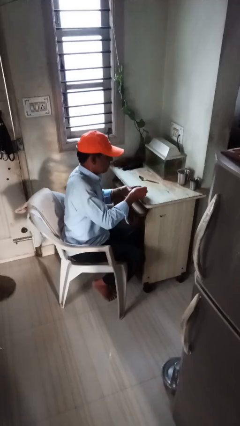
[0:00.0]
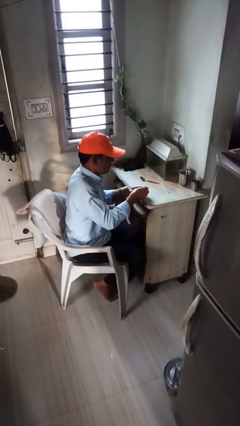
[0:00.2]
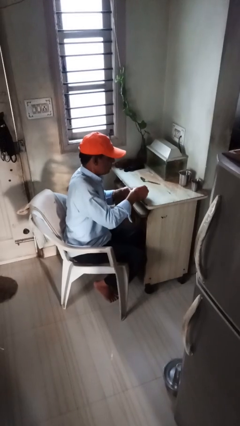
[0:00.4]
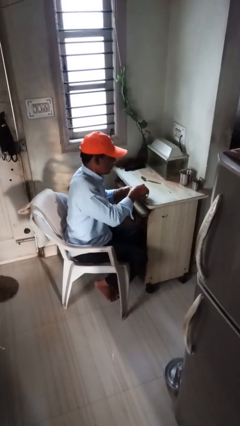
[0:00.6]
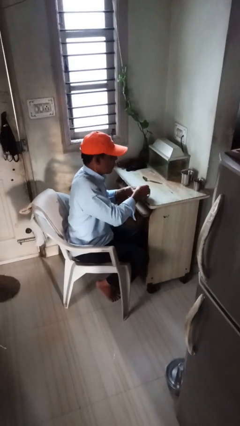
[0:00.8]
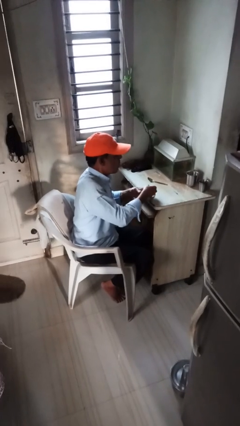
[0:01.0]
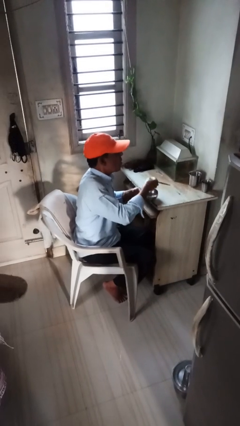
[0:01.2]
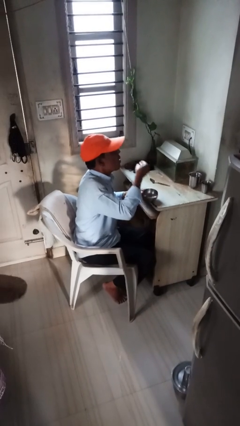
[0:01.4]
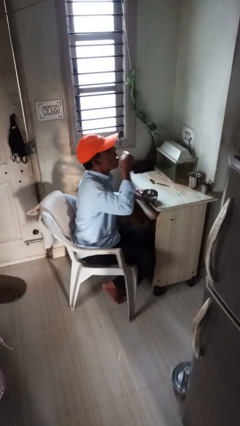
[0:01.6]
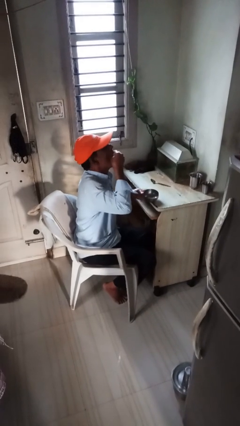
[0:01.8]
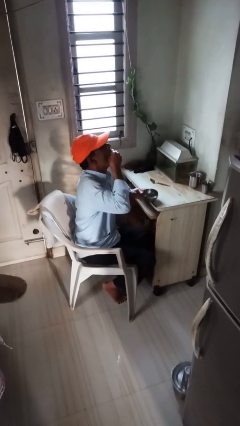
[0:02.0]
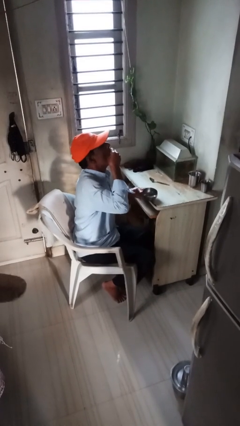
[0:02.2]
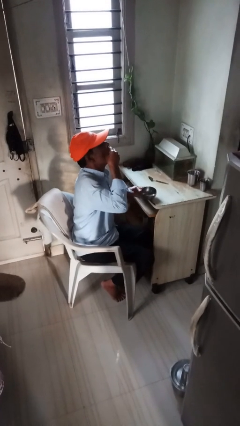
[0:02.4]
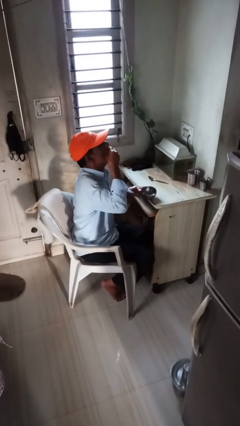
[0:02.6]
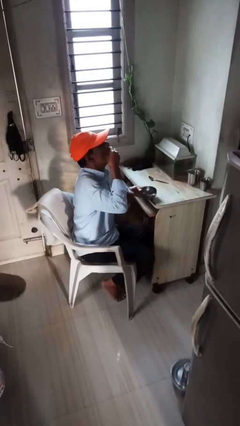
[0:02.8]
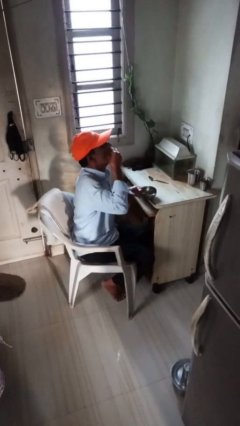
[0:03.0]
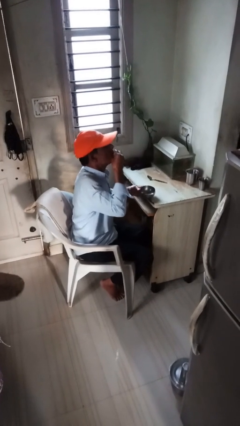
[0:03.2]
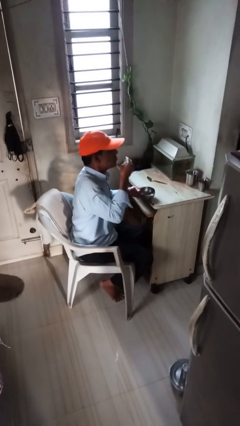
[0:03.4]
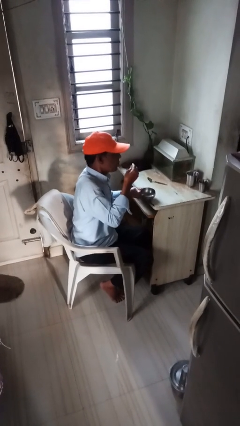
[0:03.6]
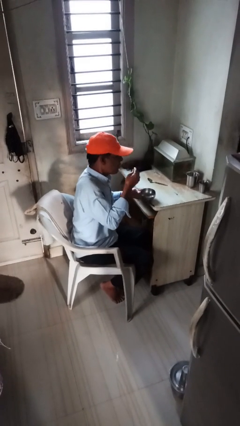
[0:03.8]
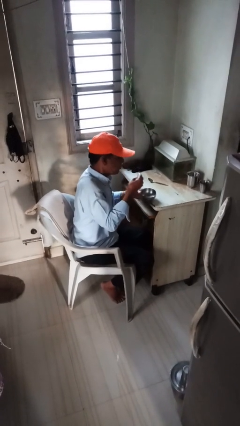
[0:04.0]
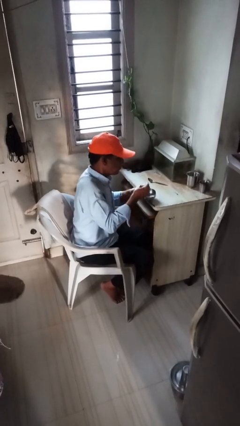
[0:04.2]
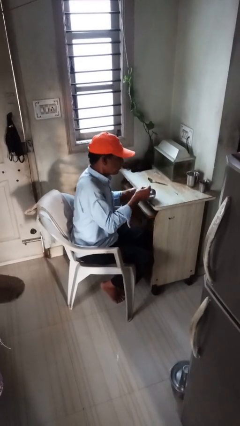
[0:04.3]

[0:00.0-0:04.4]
person eats with hands

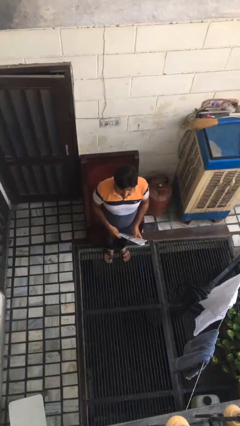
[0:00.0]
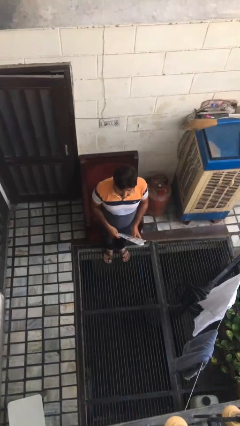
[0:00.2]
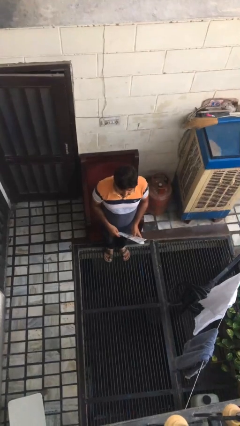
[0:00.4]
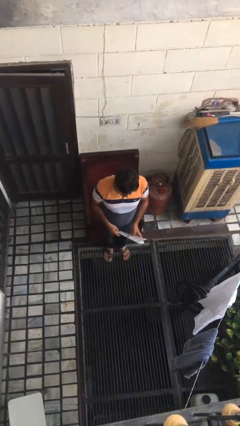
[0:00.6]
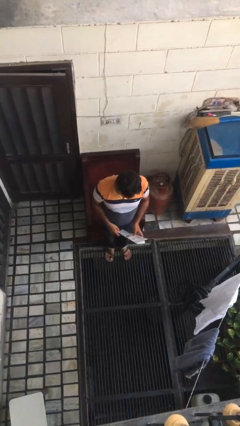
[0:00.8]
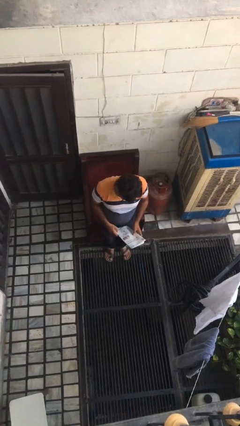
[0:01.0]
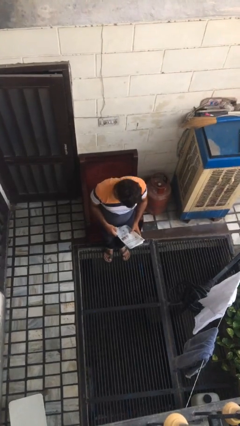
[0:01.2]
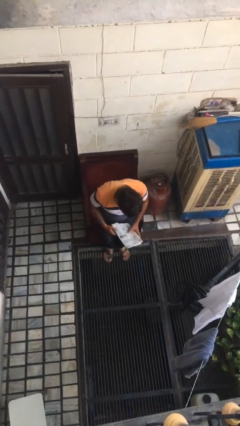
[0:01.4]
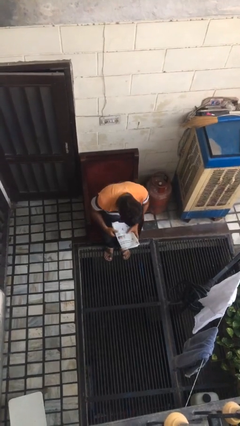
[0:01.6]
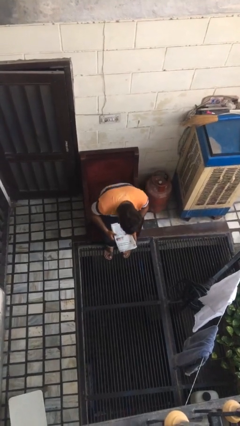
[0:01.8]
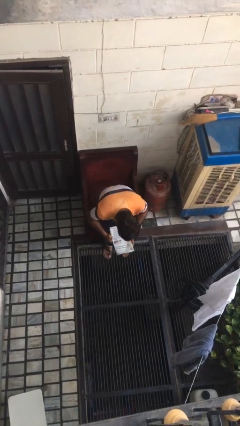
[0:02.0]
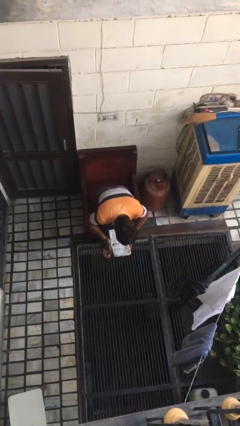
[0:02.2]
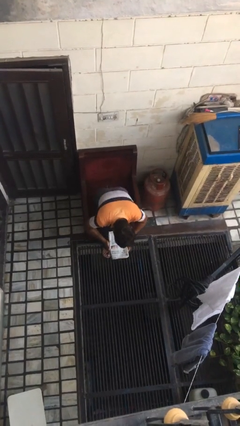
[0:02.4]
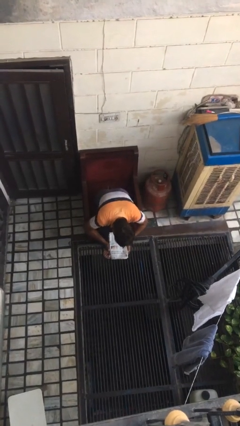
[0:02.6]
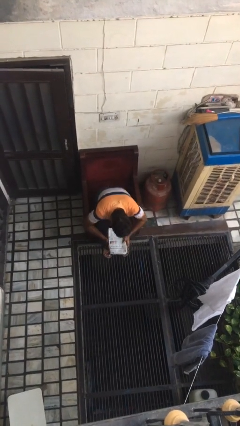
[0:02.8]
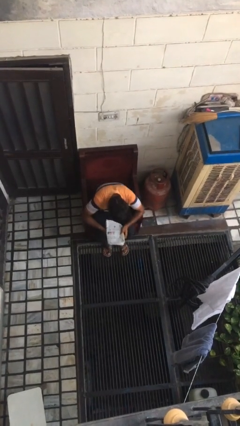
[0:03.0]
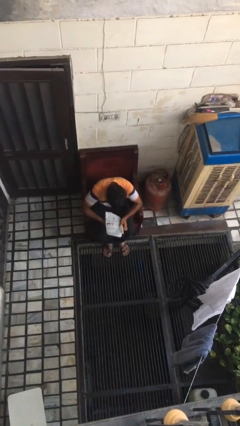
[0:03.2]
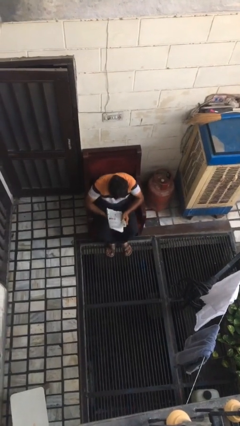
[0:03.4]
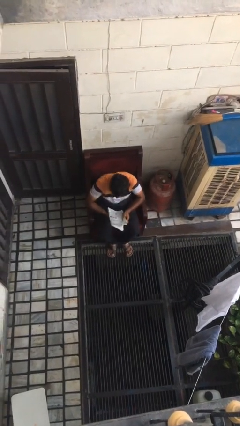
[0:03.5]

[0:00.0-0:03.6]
person sits down

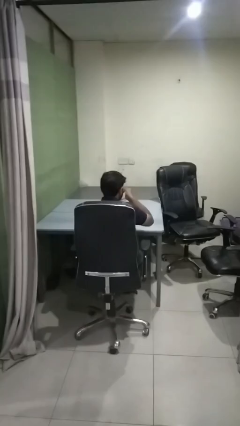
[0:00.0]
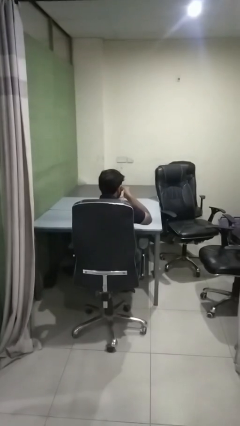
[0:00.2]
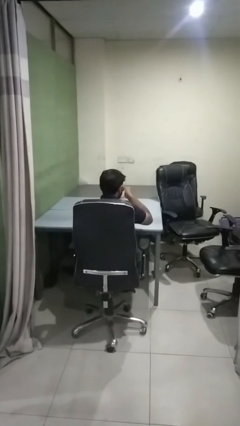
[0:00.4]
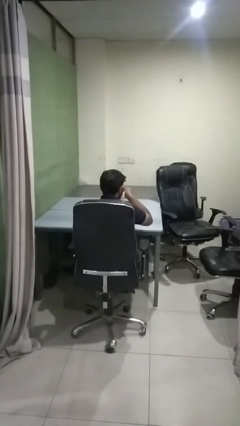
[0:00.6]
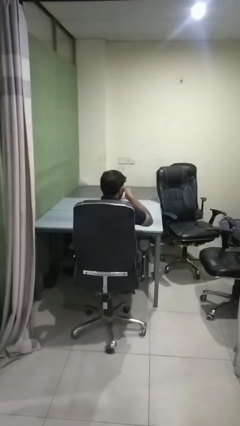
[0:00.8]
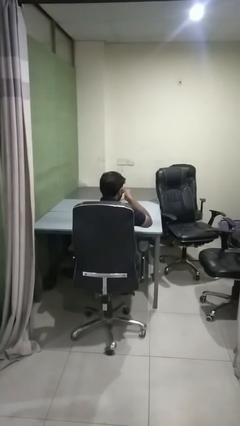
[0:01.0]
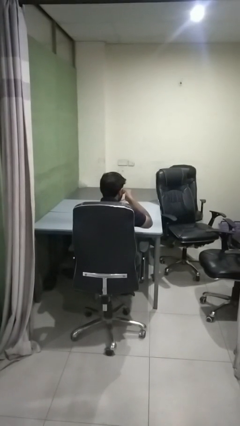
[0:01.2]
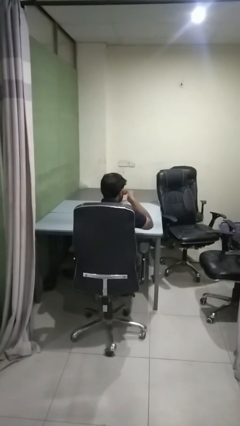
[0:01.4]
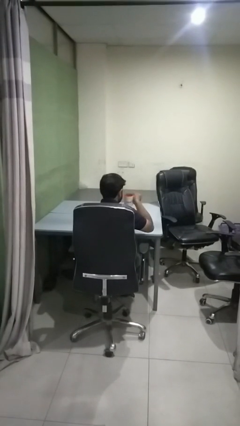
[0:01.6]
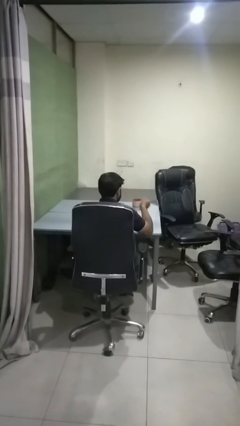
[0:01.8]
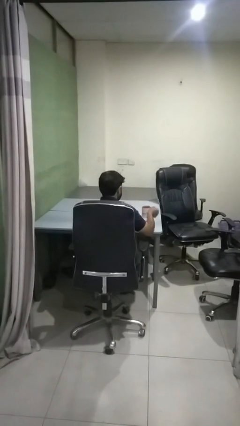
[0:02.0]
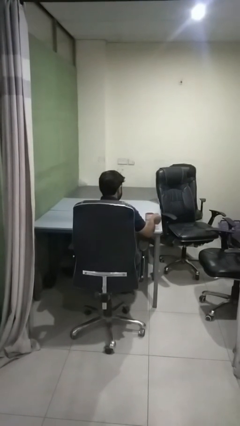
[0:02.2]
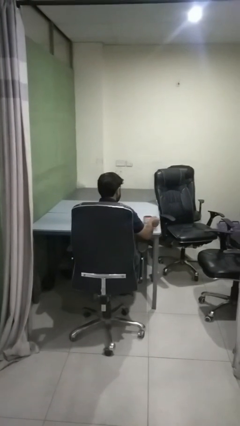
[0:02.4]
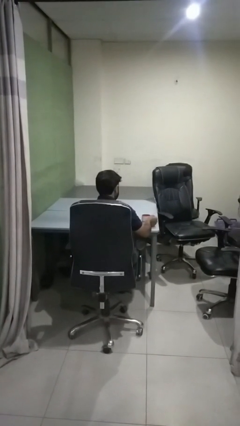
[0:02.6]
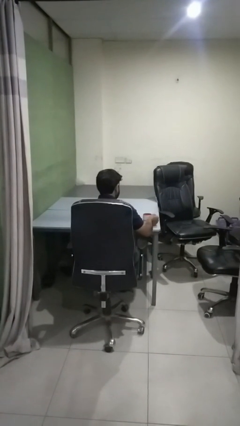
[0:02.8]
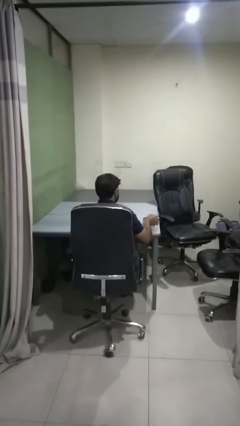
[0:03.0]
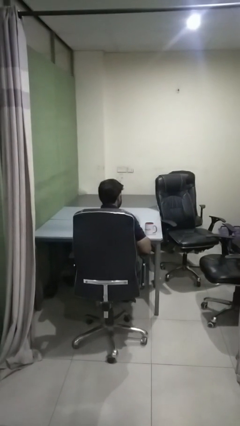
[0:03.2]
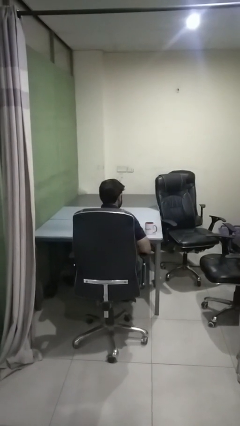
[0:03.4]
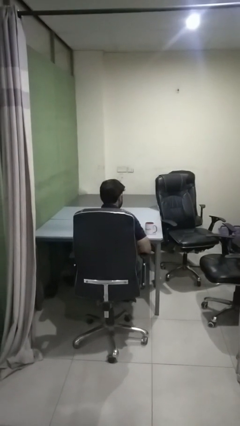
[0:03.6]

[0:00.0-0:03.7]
person puts down object on table

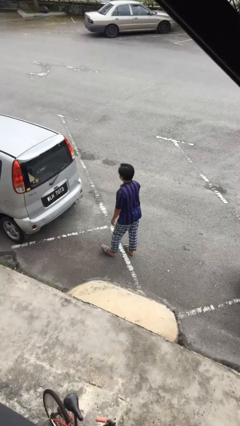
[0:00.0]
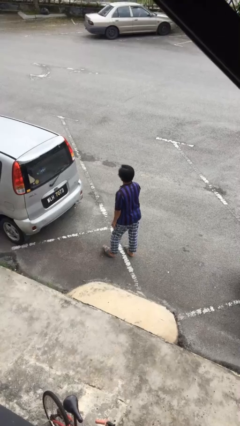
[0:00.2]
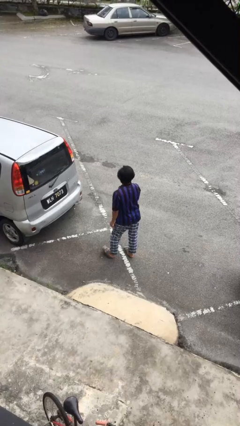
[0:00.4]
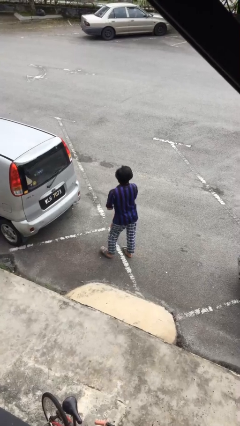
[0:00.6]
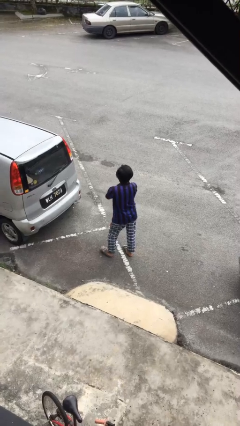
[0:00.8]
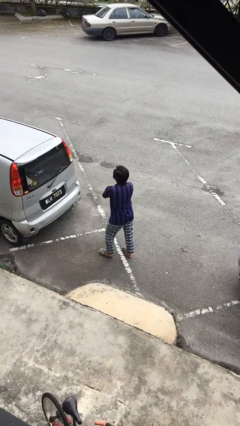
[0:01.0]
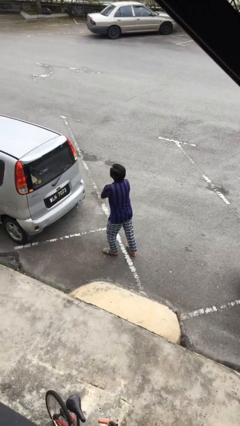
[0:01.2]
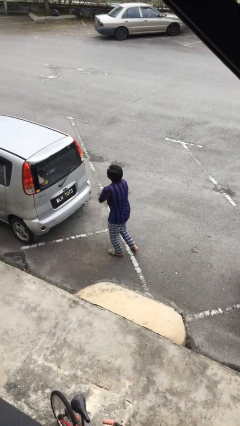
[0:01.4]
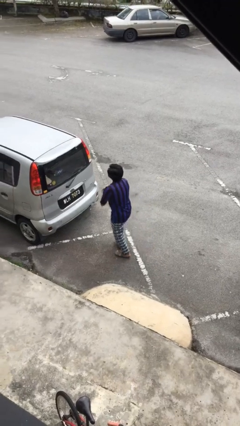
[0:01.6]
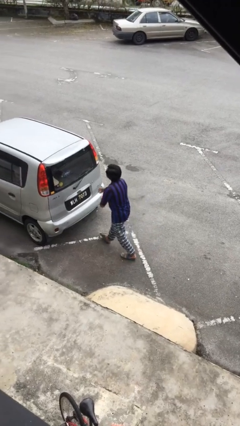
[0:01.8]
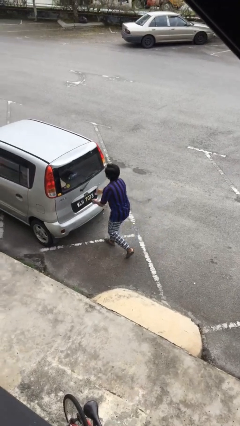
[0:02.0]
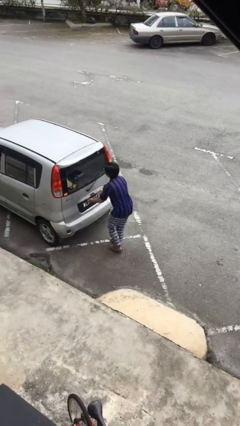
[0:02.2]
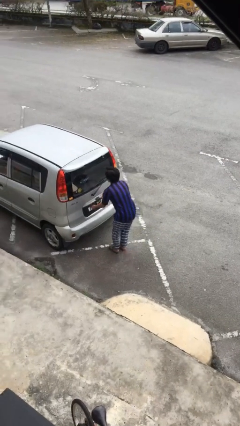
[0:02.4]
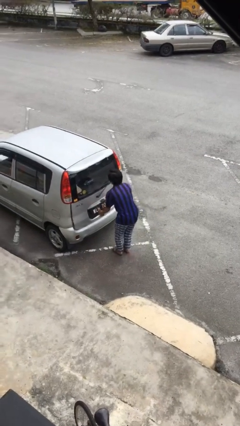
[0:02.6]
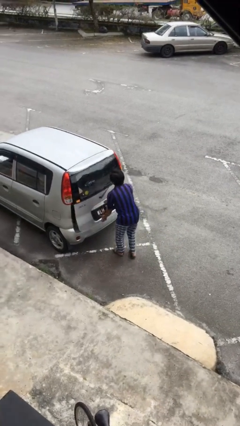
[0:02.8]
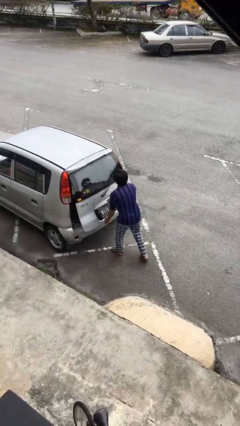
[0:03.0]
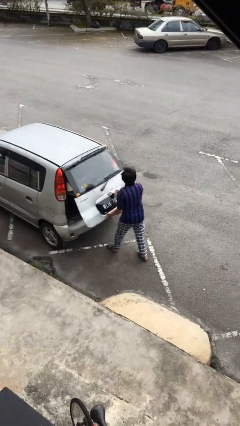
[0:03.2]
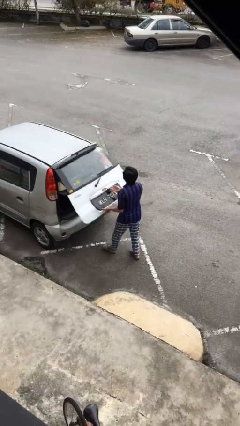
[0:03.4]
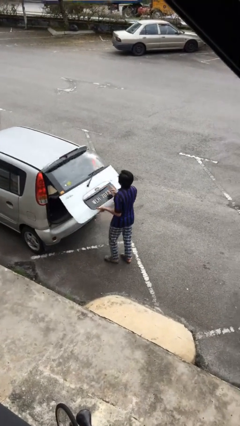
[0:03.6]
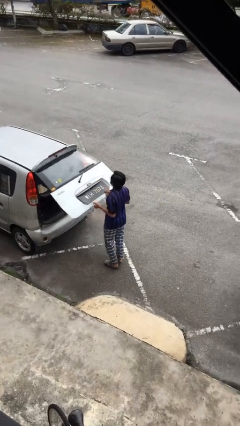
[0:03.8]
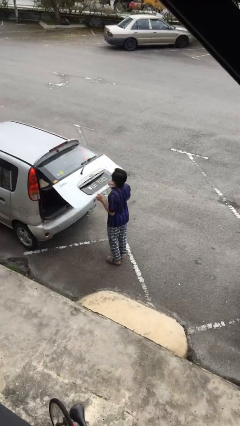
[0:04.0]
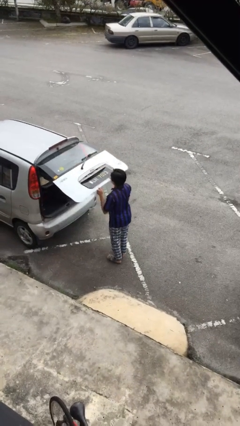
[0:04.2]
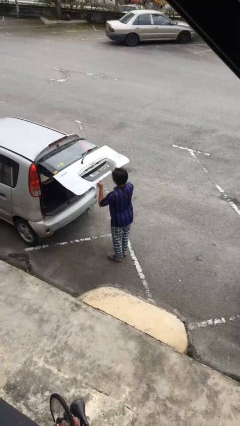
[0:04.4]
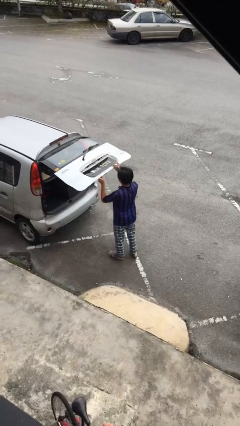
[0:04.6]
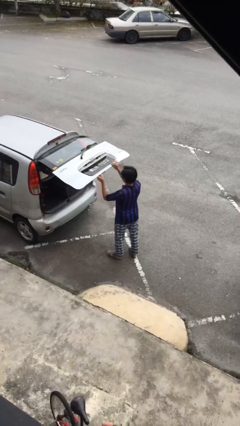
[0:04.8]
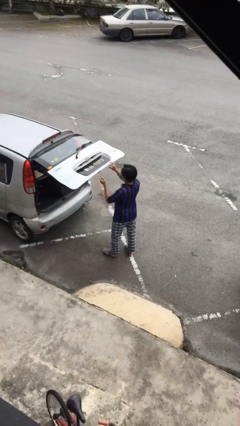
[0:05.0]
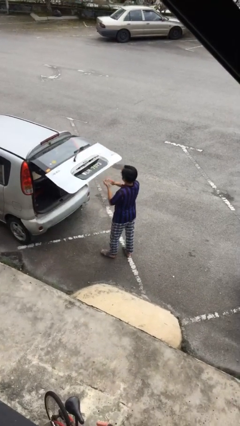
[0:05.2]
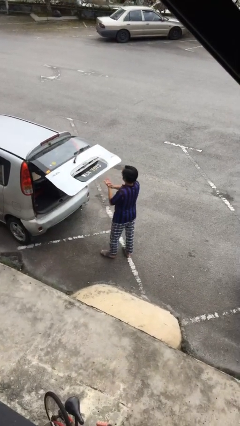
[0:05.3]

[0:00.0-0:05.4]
person opens car trunk

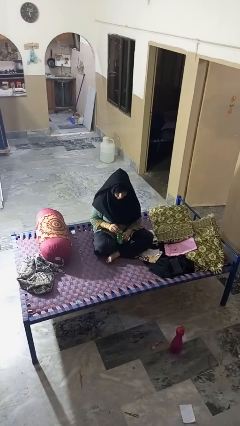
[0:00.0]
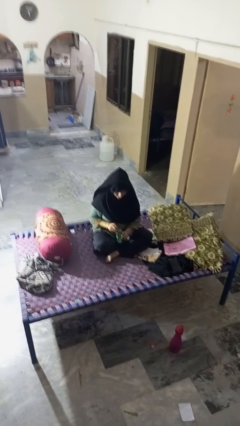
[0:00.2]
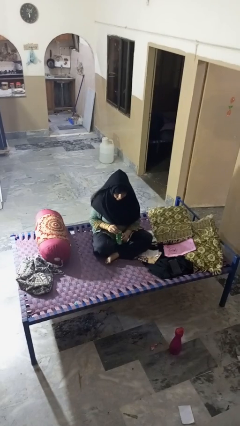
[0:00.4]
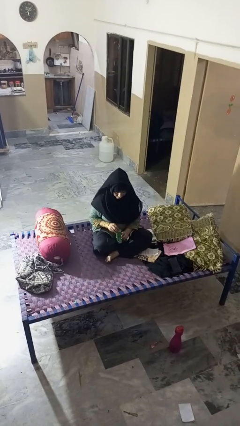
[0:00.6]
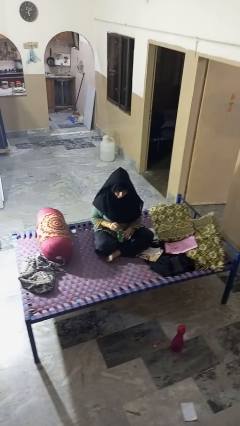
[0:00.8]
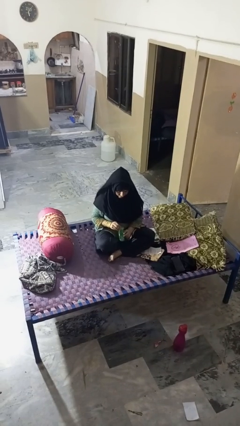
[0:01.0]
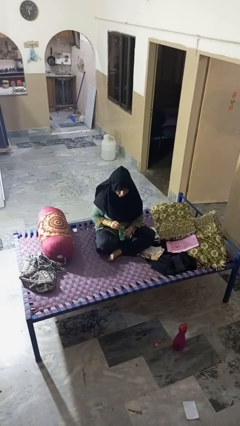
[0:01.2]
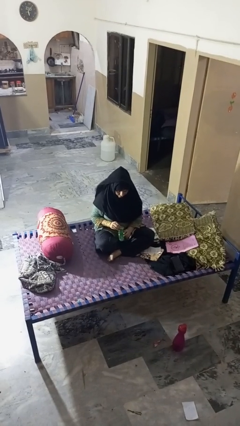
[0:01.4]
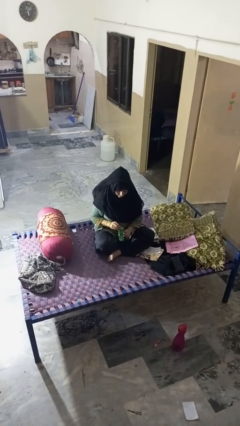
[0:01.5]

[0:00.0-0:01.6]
person opens can with can opener
